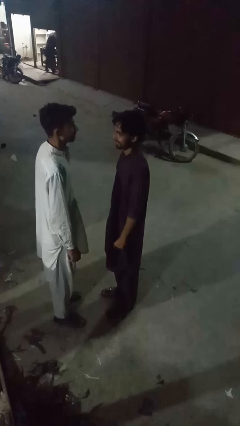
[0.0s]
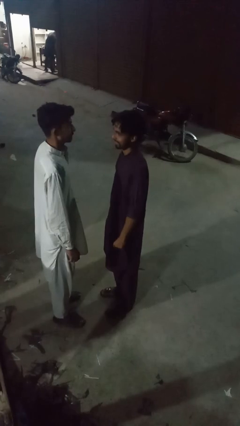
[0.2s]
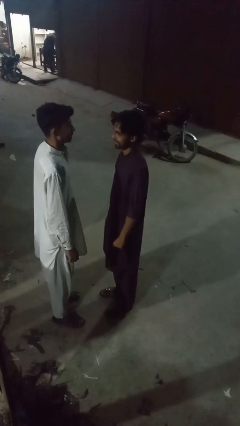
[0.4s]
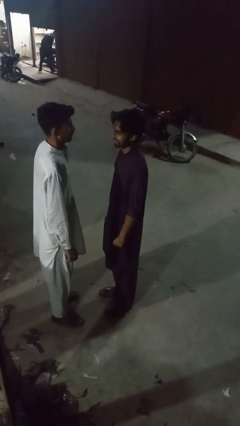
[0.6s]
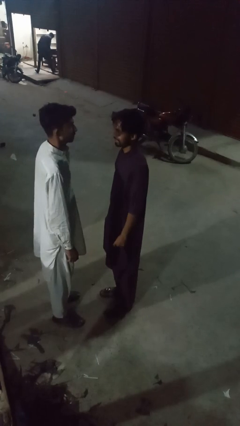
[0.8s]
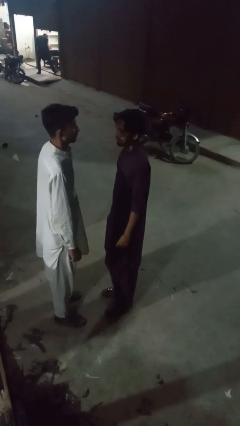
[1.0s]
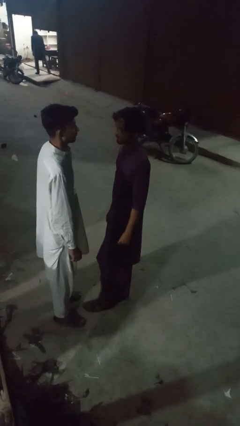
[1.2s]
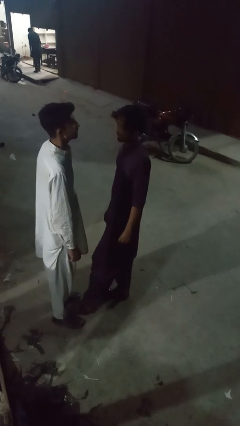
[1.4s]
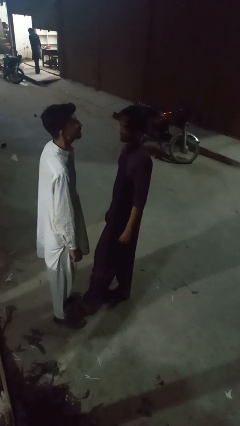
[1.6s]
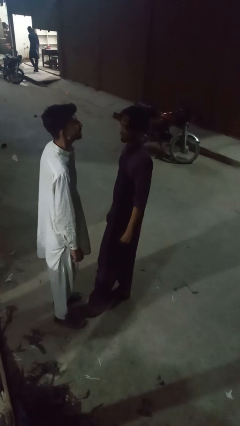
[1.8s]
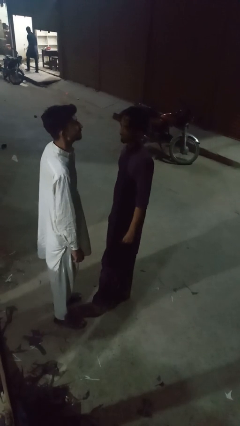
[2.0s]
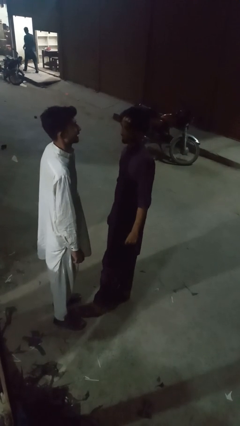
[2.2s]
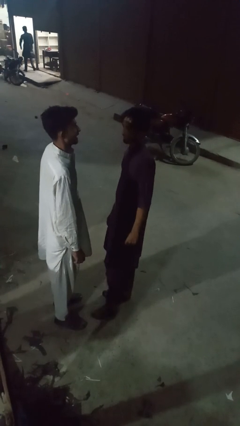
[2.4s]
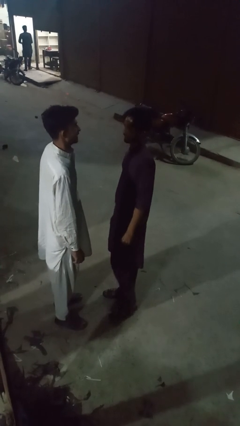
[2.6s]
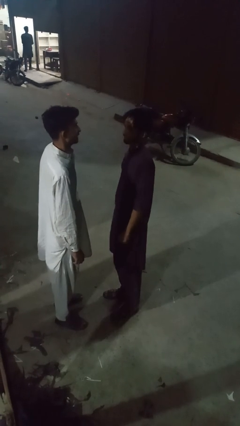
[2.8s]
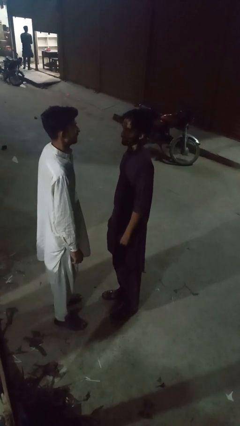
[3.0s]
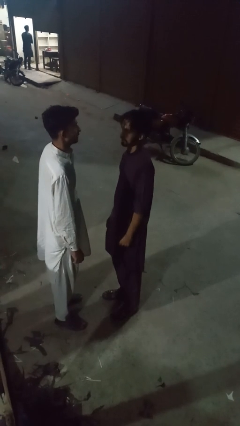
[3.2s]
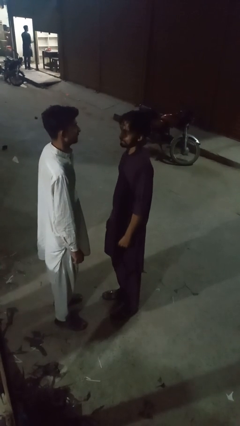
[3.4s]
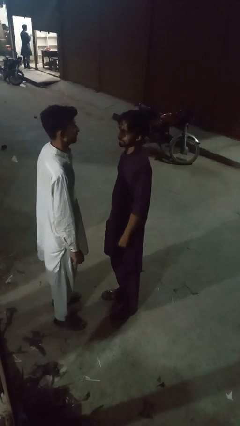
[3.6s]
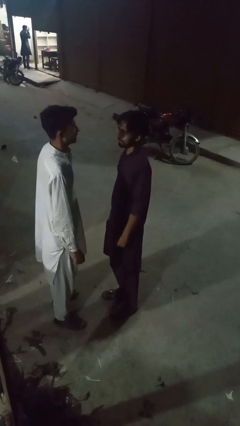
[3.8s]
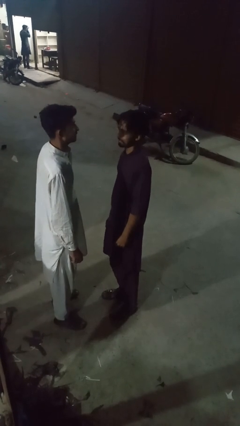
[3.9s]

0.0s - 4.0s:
person kicks object to person

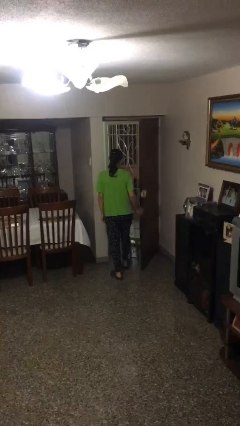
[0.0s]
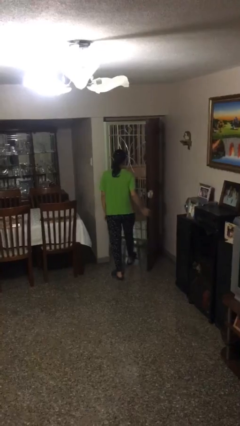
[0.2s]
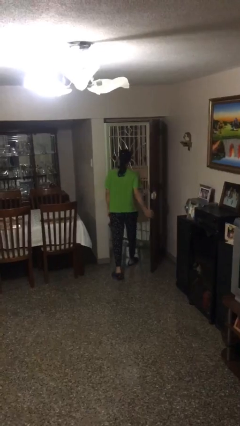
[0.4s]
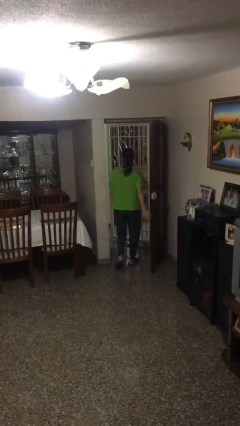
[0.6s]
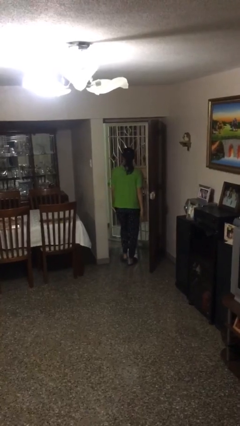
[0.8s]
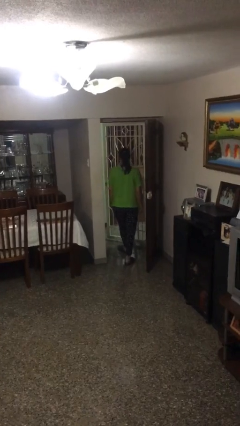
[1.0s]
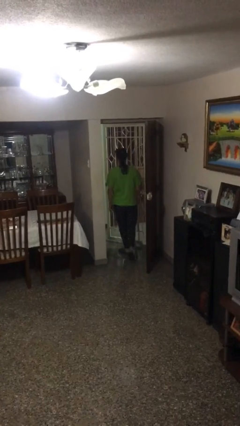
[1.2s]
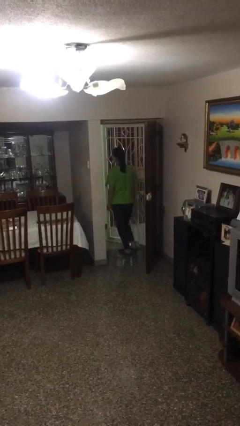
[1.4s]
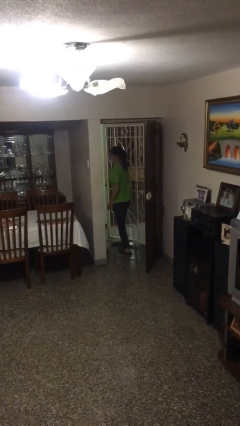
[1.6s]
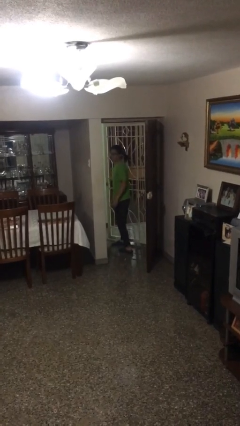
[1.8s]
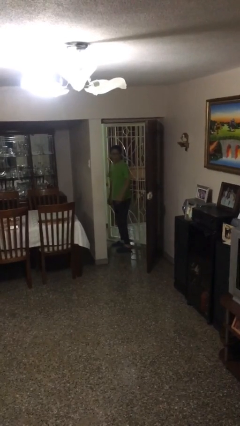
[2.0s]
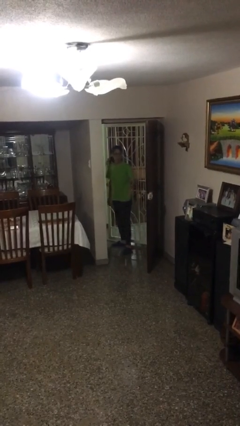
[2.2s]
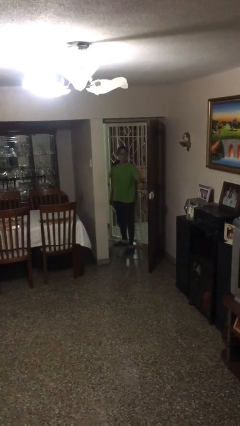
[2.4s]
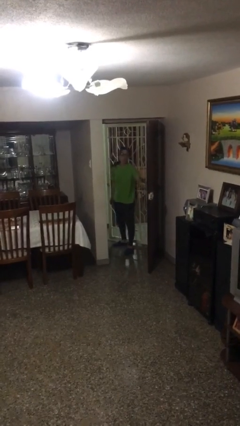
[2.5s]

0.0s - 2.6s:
person exits scene through structure

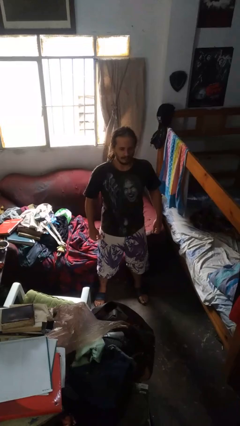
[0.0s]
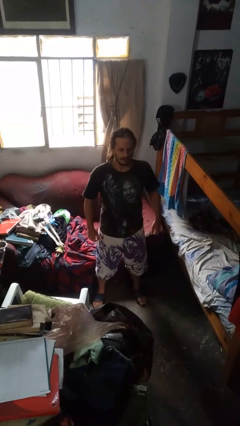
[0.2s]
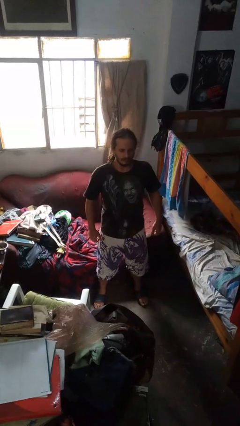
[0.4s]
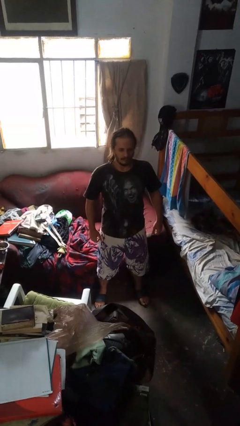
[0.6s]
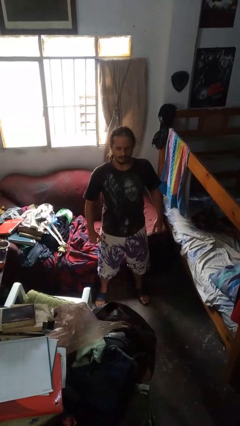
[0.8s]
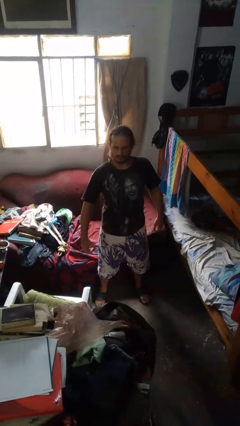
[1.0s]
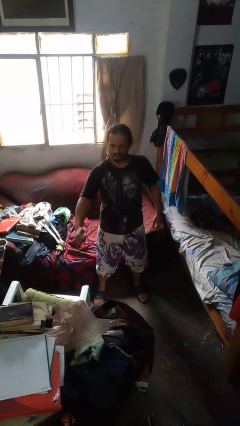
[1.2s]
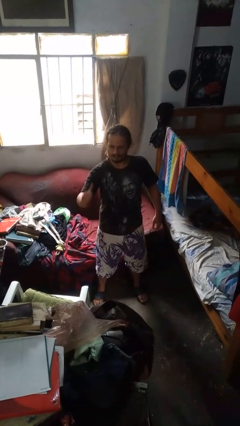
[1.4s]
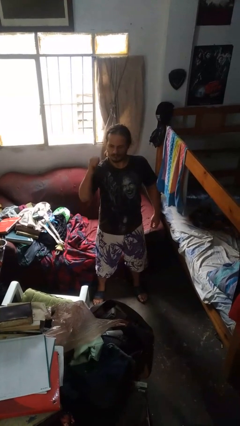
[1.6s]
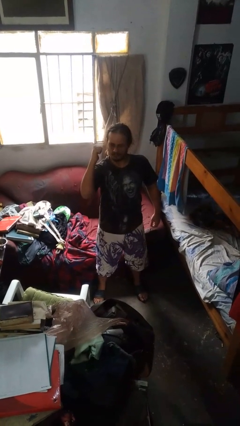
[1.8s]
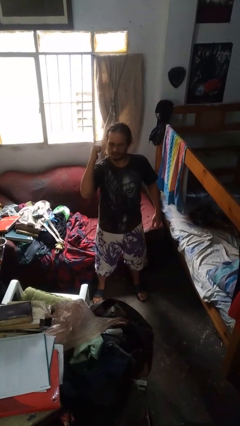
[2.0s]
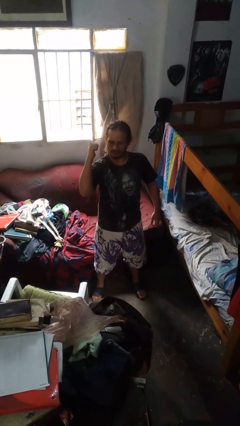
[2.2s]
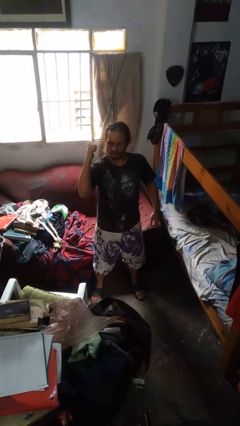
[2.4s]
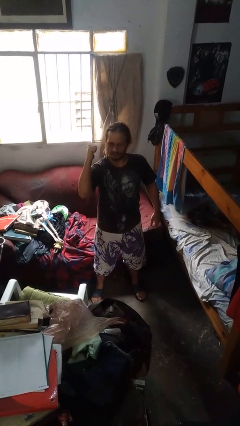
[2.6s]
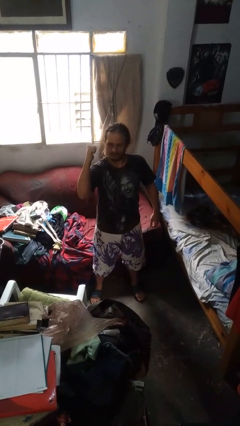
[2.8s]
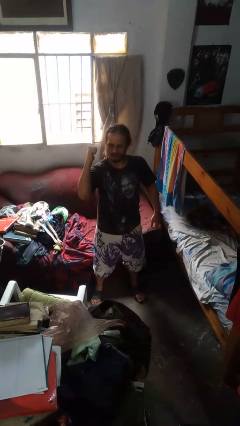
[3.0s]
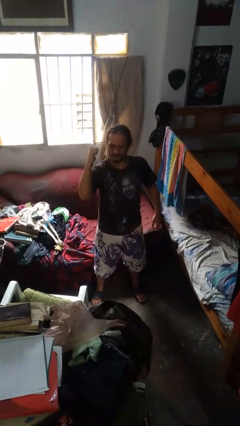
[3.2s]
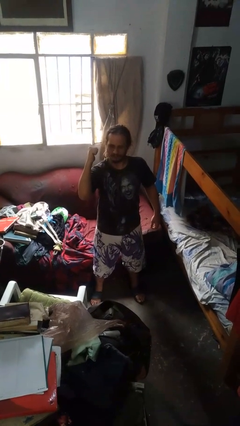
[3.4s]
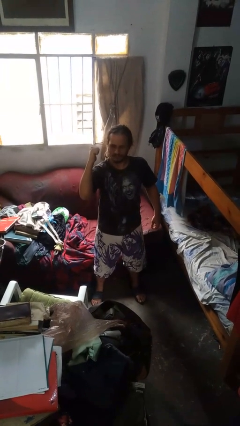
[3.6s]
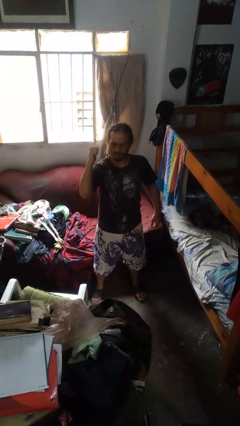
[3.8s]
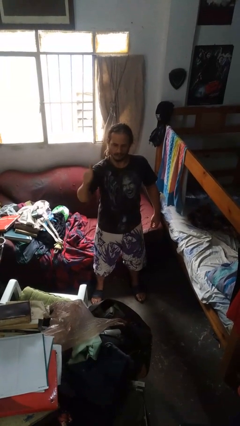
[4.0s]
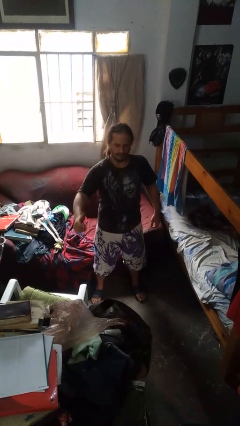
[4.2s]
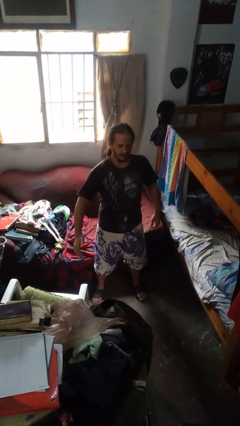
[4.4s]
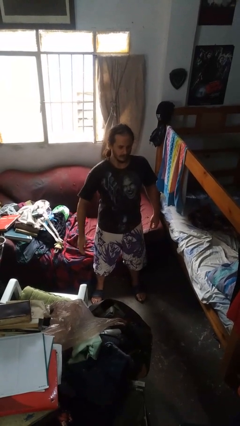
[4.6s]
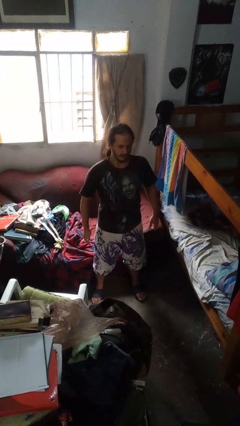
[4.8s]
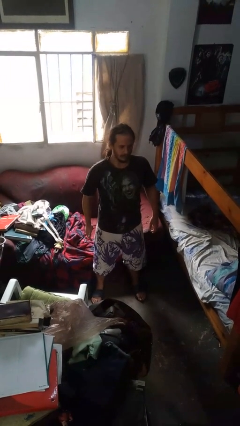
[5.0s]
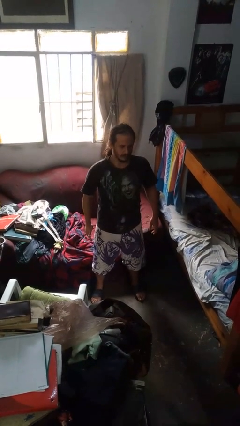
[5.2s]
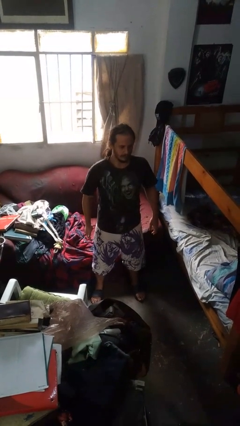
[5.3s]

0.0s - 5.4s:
person gestures behind me

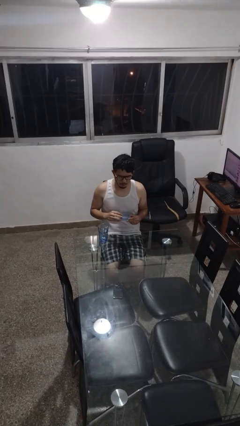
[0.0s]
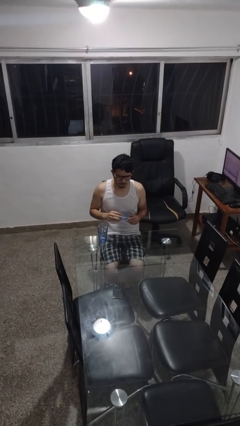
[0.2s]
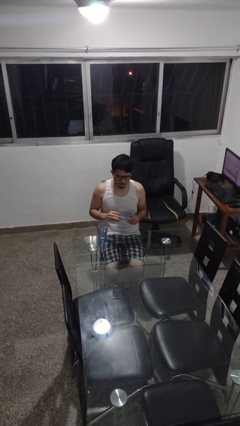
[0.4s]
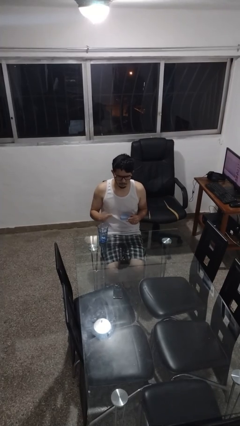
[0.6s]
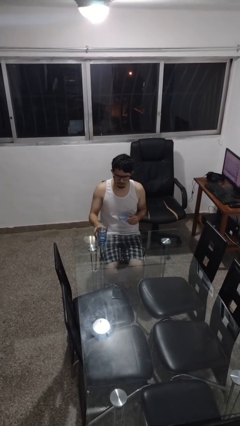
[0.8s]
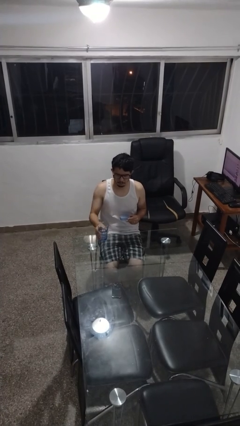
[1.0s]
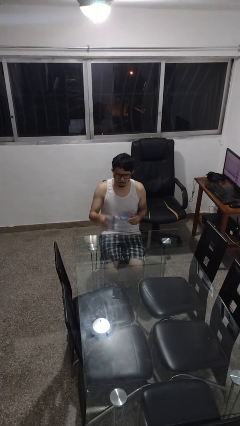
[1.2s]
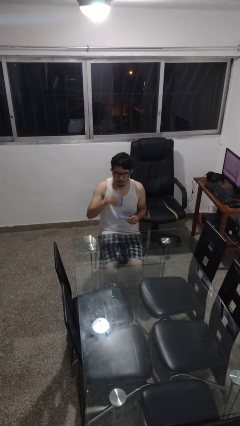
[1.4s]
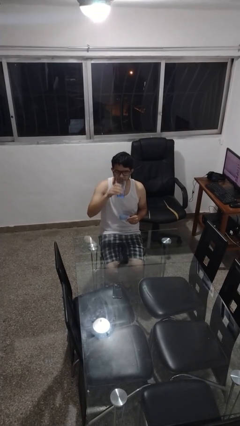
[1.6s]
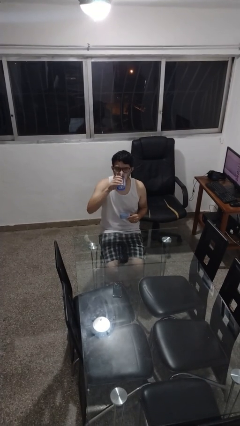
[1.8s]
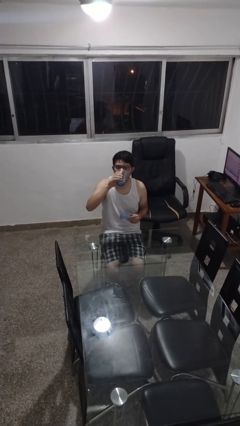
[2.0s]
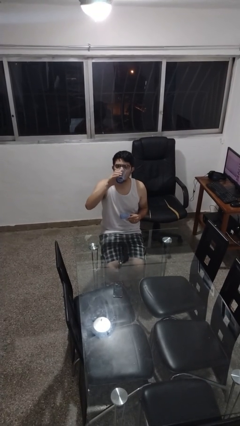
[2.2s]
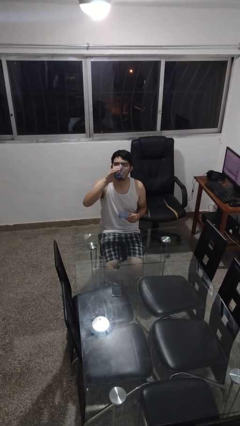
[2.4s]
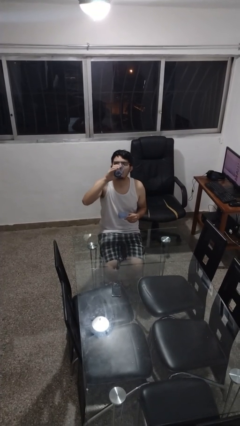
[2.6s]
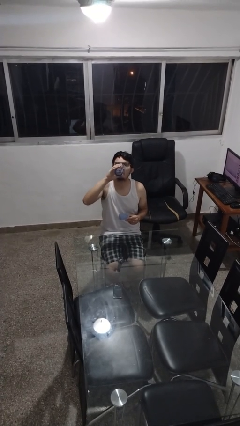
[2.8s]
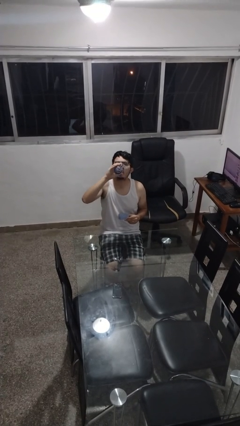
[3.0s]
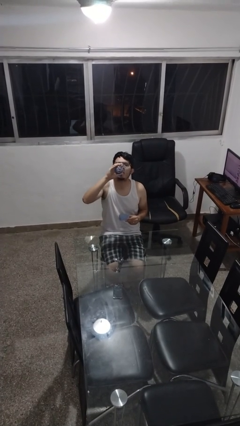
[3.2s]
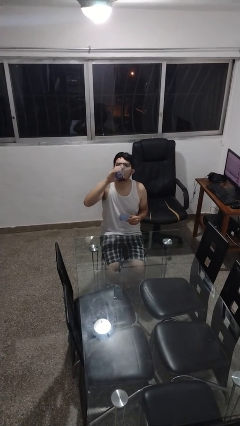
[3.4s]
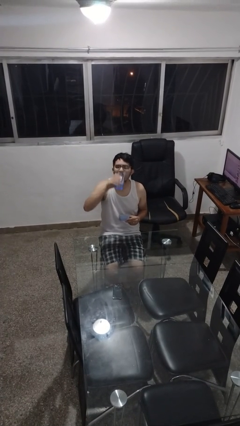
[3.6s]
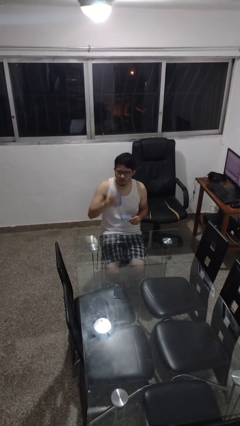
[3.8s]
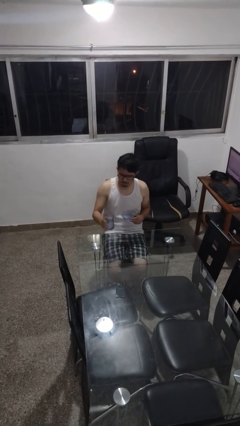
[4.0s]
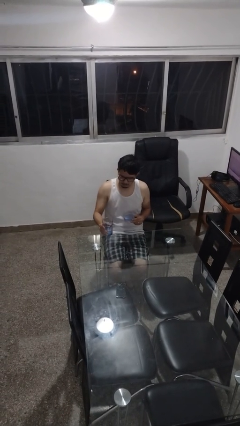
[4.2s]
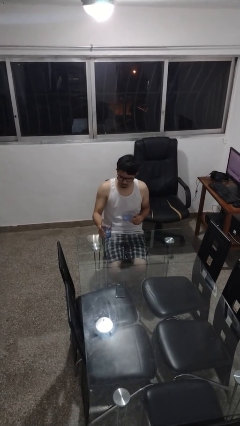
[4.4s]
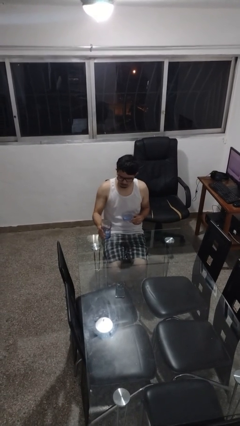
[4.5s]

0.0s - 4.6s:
person drinks from cup

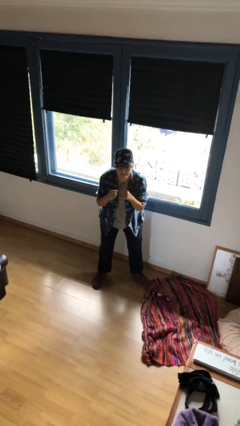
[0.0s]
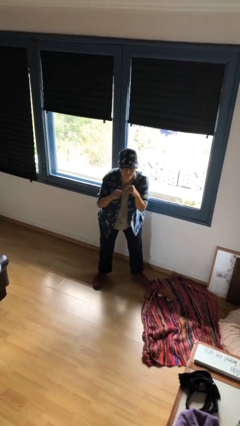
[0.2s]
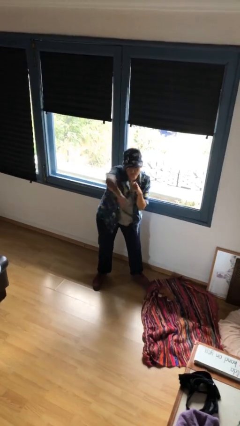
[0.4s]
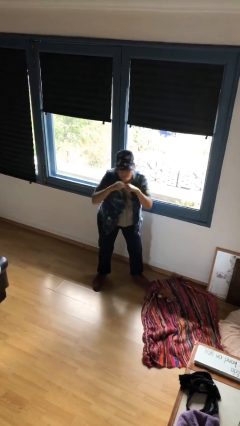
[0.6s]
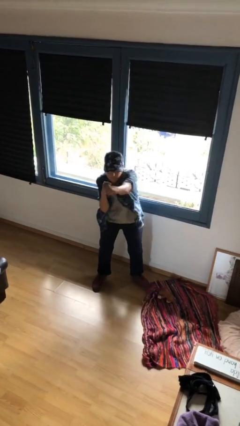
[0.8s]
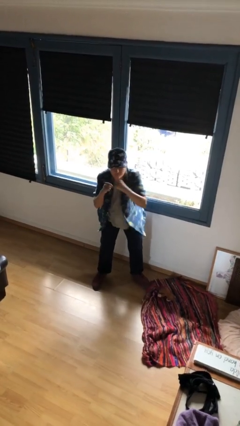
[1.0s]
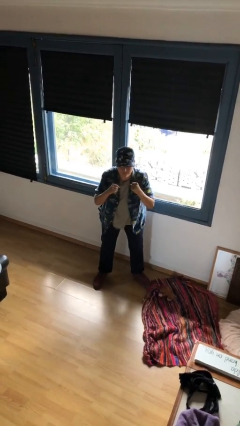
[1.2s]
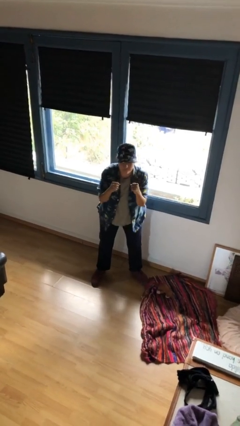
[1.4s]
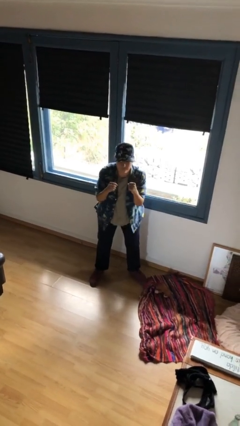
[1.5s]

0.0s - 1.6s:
person punches
